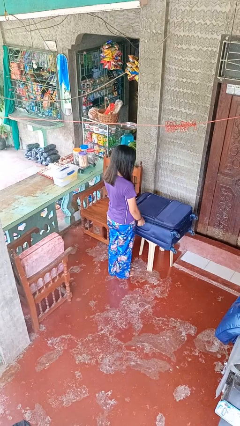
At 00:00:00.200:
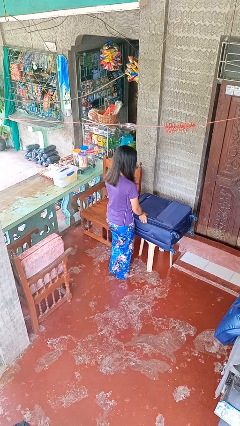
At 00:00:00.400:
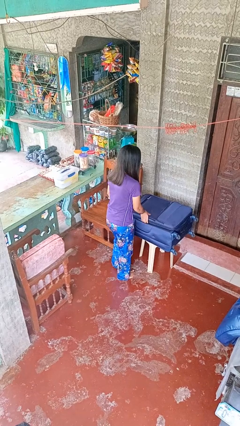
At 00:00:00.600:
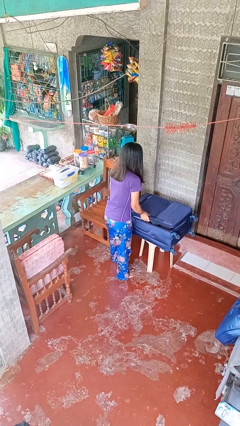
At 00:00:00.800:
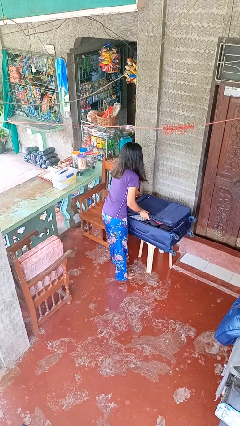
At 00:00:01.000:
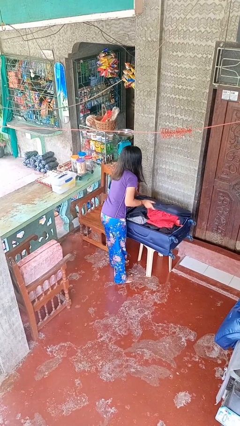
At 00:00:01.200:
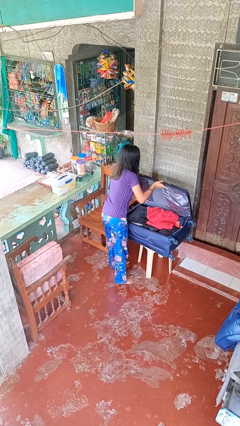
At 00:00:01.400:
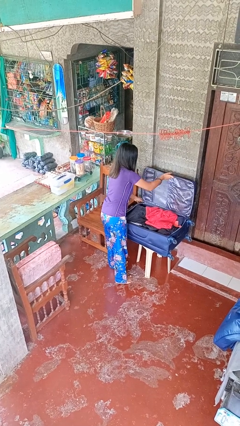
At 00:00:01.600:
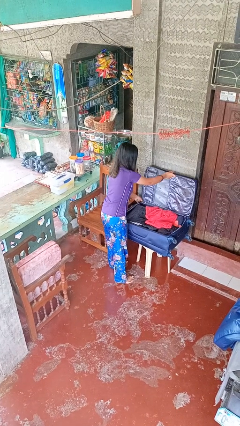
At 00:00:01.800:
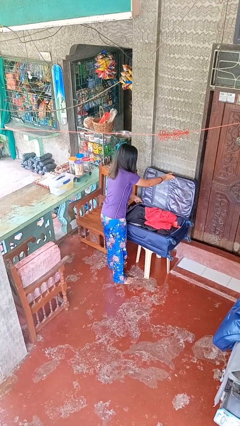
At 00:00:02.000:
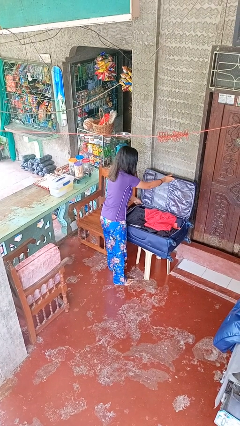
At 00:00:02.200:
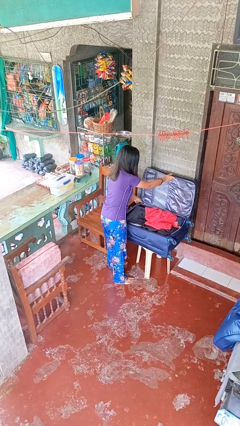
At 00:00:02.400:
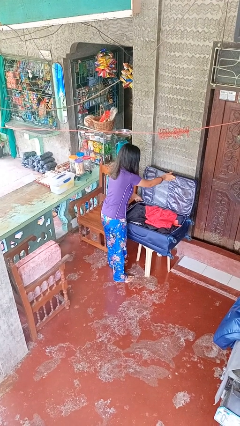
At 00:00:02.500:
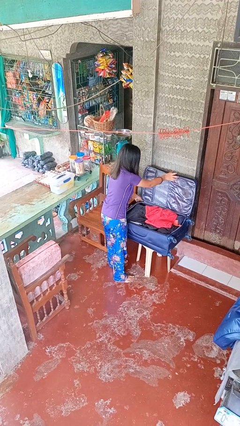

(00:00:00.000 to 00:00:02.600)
person opens suitcase

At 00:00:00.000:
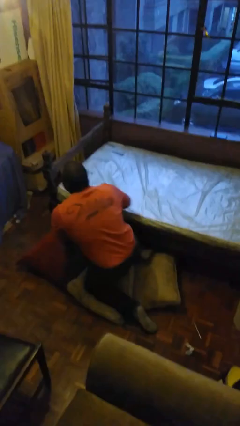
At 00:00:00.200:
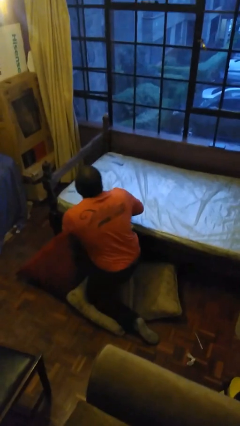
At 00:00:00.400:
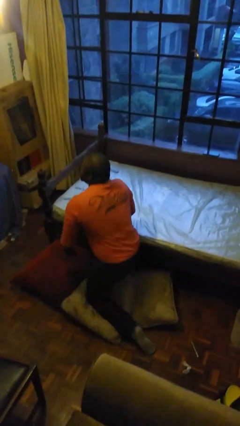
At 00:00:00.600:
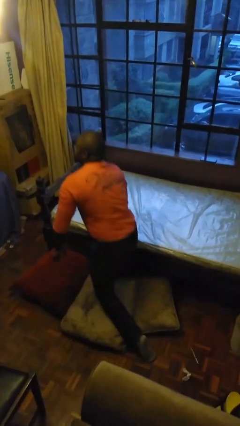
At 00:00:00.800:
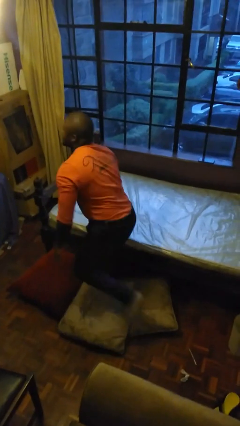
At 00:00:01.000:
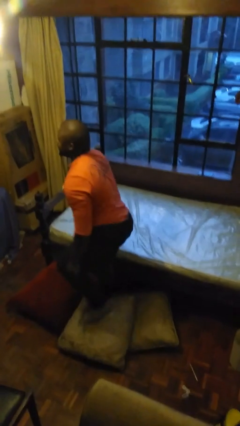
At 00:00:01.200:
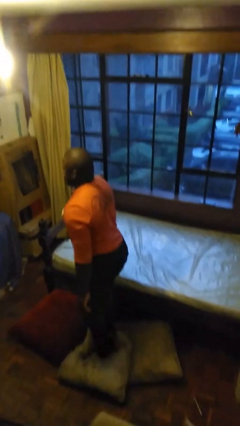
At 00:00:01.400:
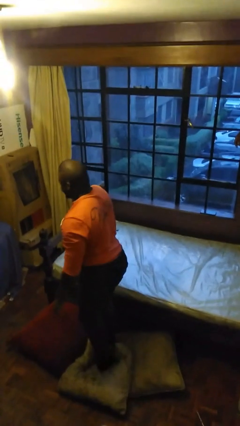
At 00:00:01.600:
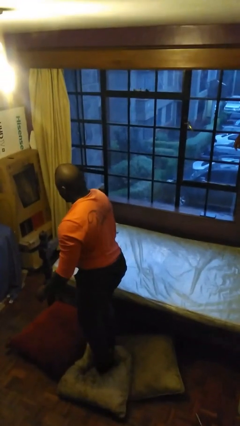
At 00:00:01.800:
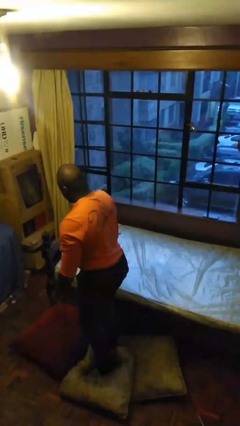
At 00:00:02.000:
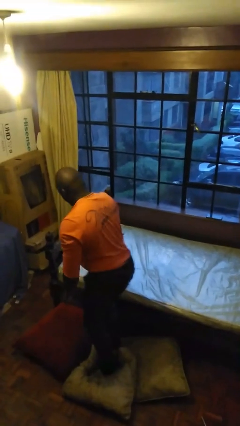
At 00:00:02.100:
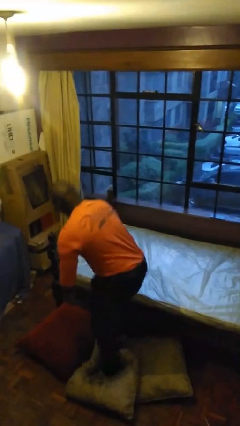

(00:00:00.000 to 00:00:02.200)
person stands up from floor

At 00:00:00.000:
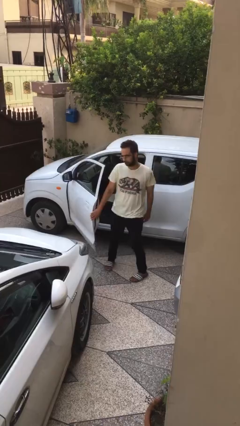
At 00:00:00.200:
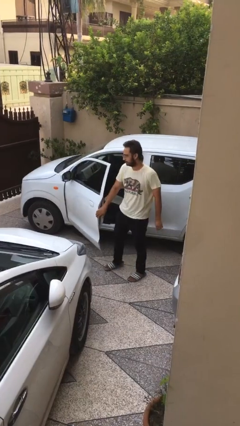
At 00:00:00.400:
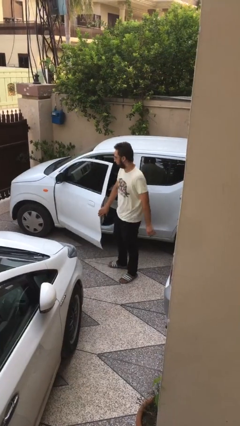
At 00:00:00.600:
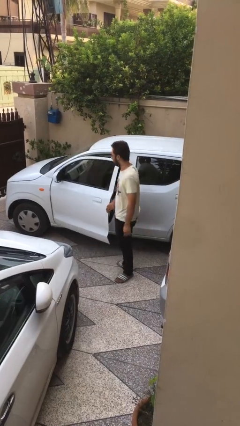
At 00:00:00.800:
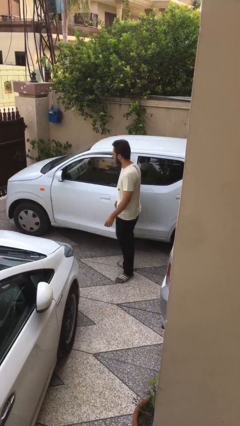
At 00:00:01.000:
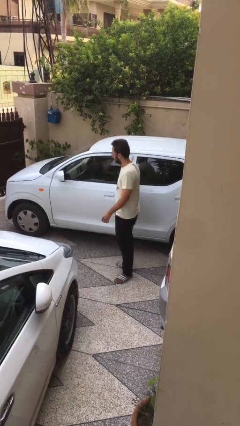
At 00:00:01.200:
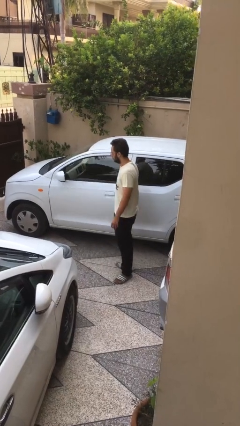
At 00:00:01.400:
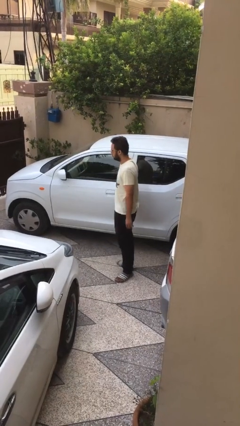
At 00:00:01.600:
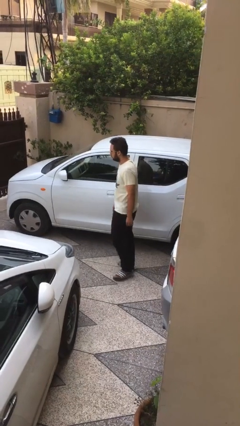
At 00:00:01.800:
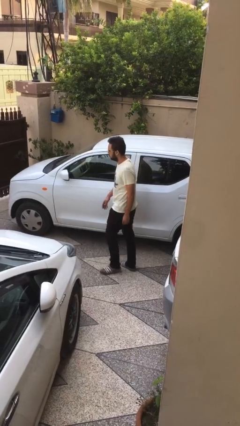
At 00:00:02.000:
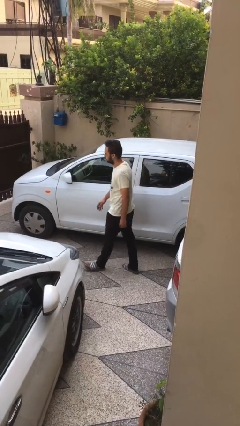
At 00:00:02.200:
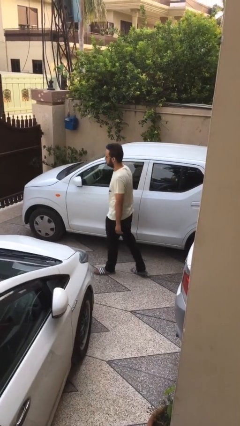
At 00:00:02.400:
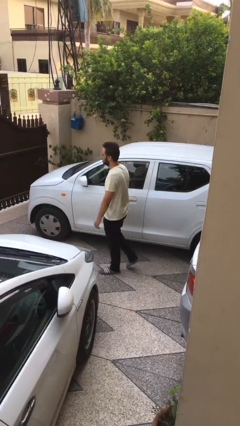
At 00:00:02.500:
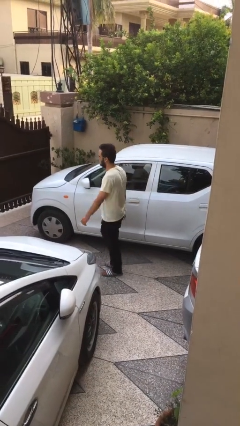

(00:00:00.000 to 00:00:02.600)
person closes car door

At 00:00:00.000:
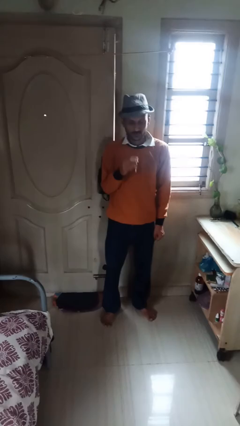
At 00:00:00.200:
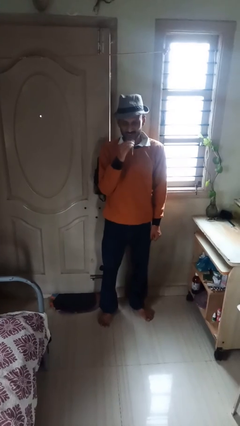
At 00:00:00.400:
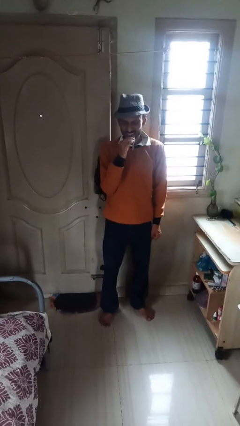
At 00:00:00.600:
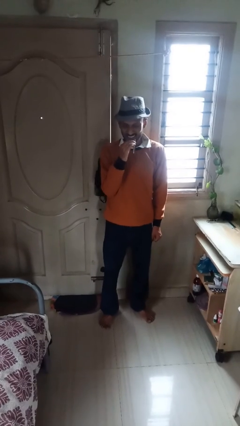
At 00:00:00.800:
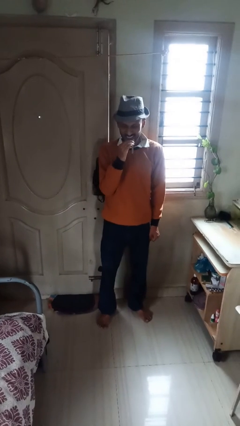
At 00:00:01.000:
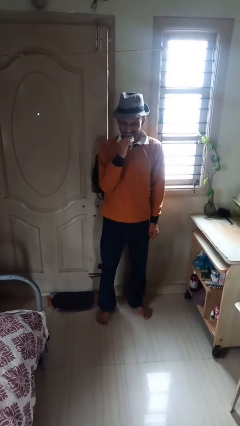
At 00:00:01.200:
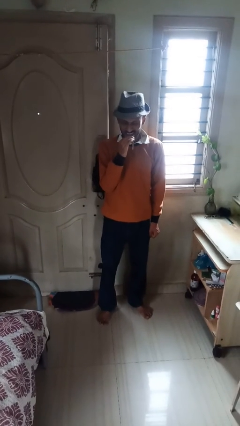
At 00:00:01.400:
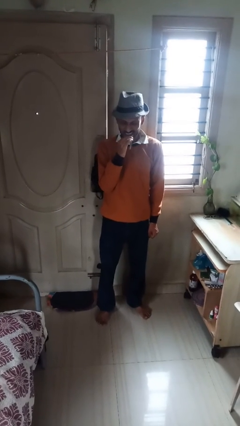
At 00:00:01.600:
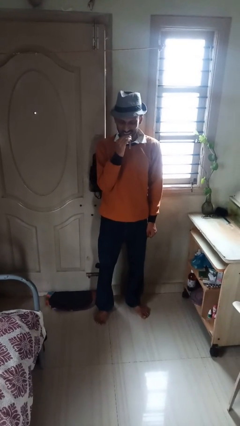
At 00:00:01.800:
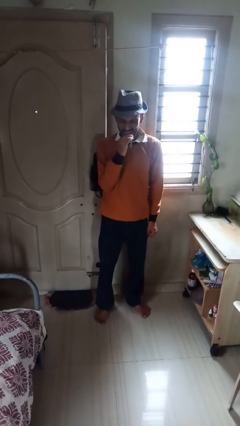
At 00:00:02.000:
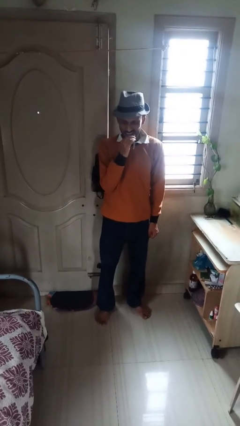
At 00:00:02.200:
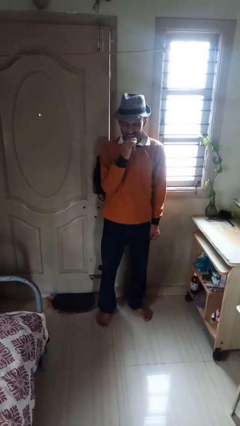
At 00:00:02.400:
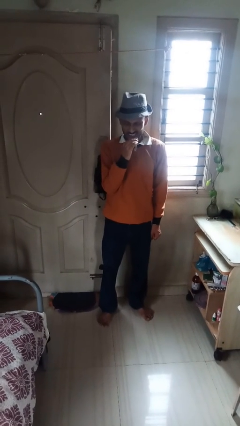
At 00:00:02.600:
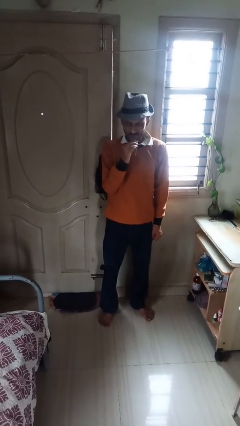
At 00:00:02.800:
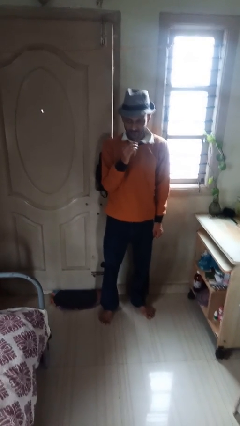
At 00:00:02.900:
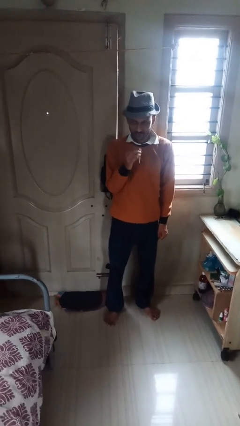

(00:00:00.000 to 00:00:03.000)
person flosses

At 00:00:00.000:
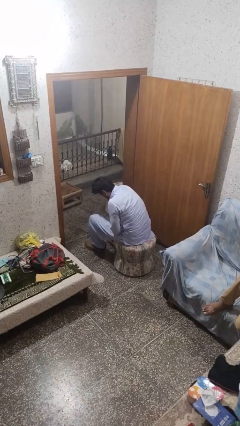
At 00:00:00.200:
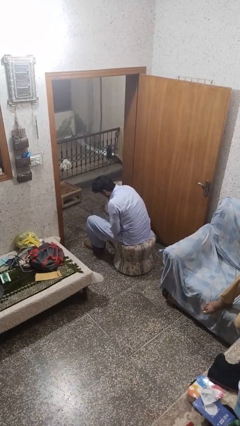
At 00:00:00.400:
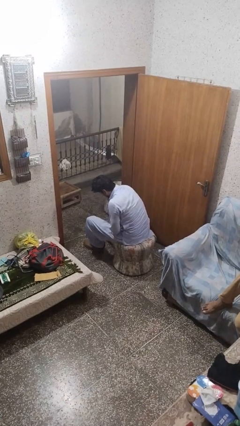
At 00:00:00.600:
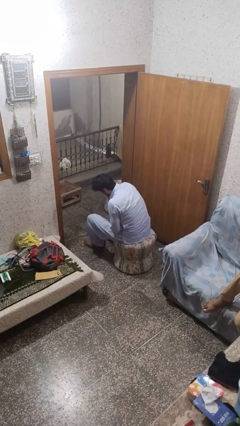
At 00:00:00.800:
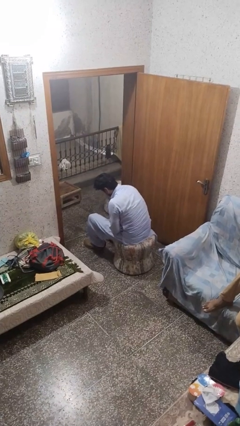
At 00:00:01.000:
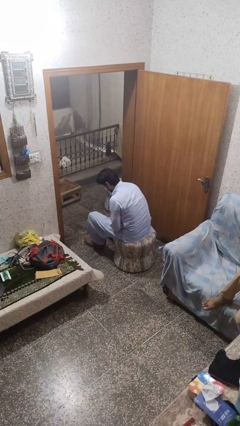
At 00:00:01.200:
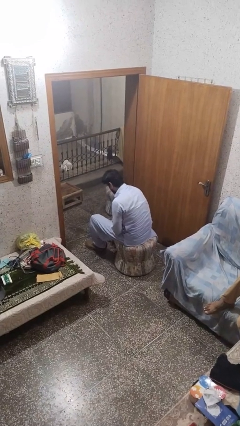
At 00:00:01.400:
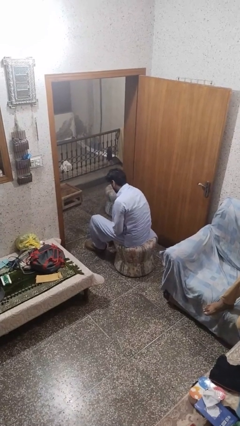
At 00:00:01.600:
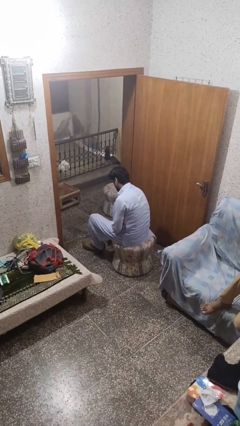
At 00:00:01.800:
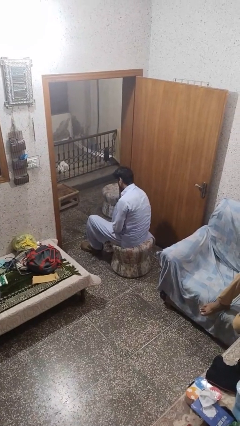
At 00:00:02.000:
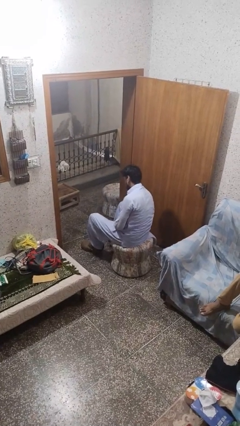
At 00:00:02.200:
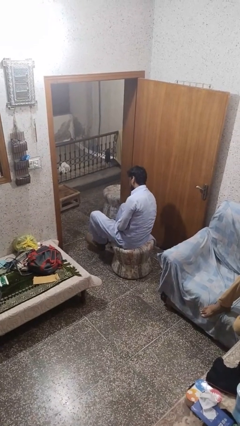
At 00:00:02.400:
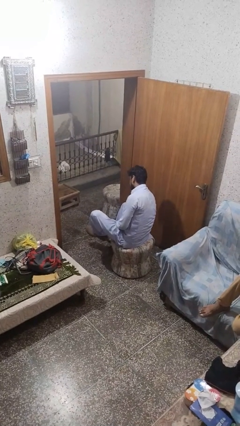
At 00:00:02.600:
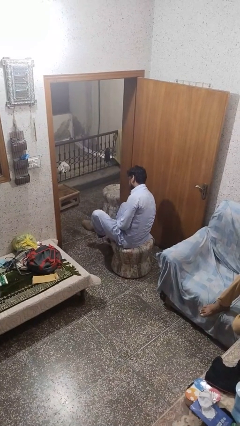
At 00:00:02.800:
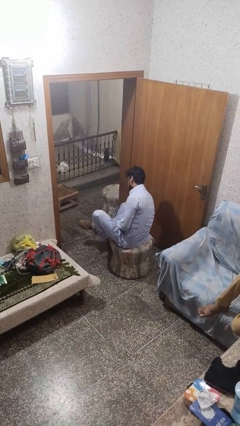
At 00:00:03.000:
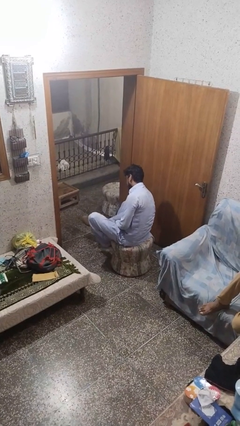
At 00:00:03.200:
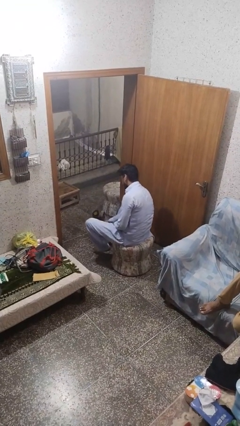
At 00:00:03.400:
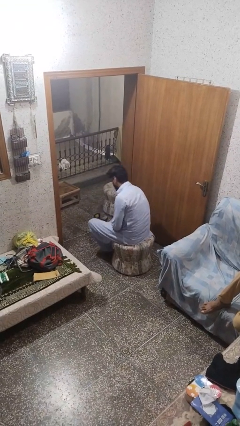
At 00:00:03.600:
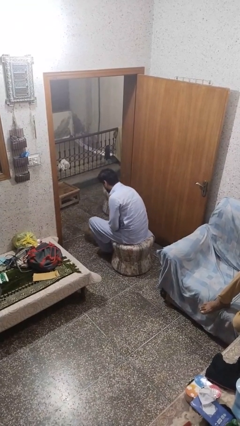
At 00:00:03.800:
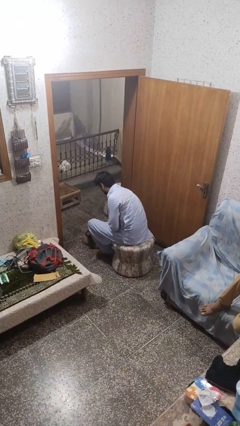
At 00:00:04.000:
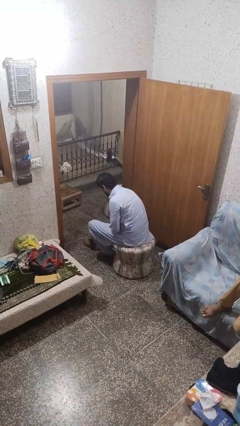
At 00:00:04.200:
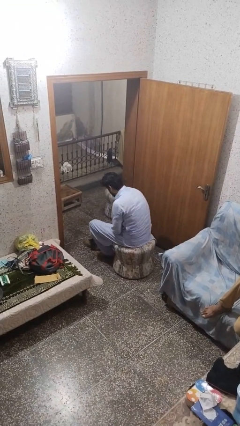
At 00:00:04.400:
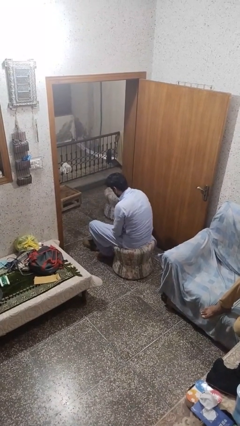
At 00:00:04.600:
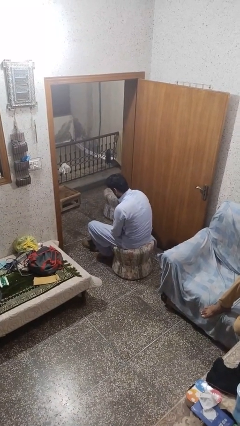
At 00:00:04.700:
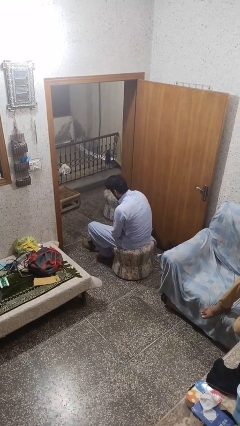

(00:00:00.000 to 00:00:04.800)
person takes off shoes

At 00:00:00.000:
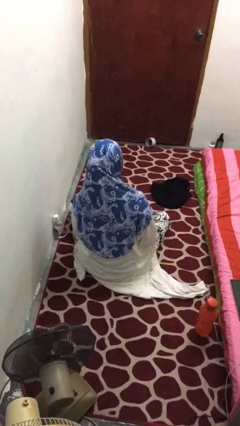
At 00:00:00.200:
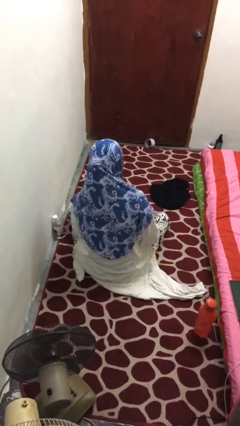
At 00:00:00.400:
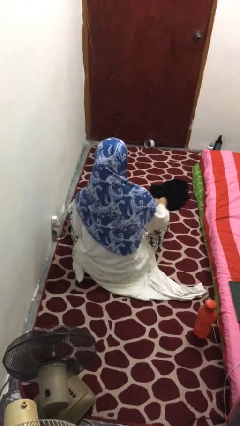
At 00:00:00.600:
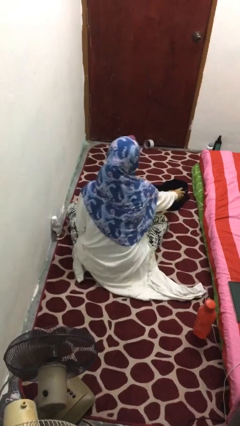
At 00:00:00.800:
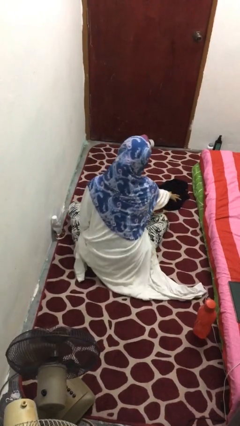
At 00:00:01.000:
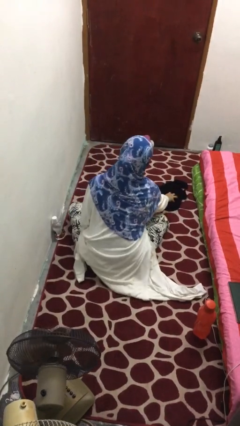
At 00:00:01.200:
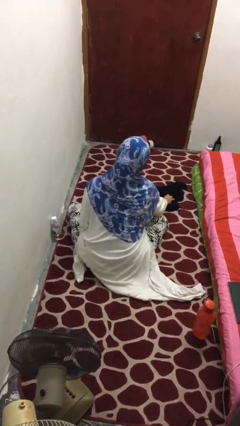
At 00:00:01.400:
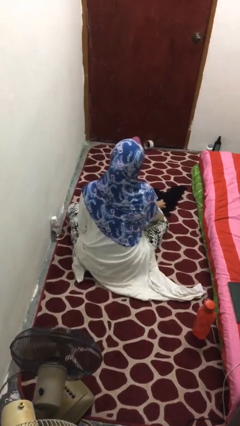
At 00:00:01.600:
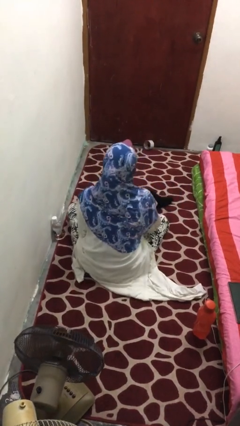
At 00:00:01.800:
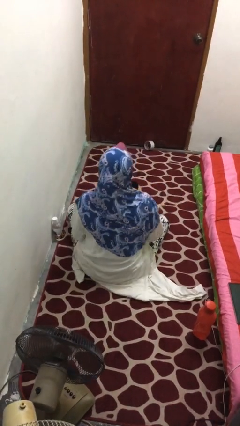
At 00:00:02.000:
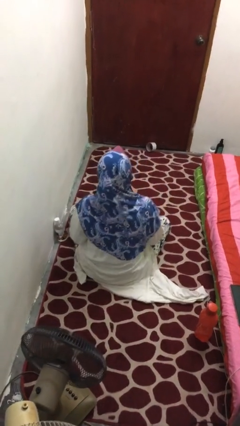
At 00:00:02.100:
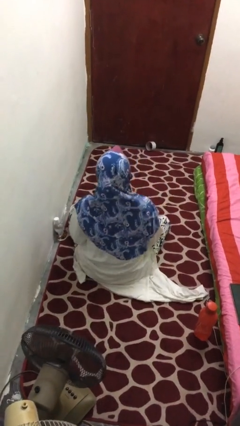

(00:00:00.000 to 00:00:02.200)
person picks up object from floor
